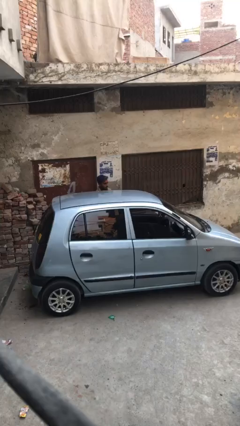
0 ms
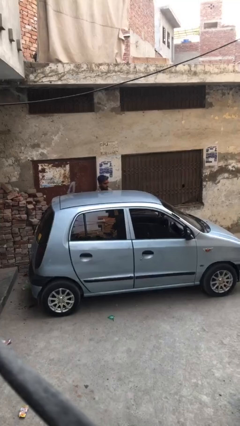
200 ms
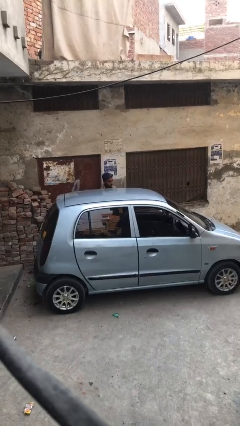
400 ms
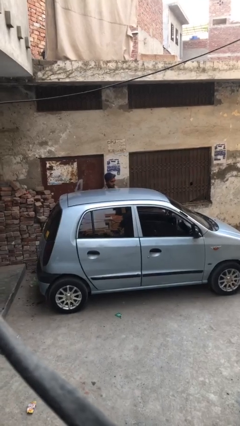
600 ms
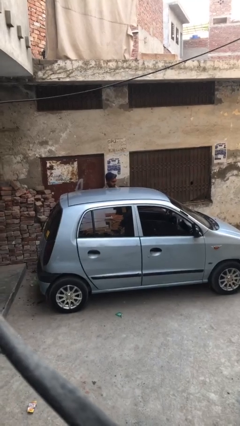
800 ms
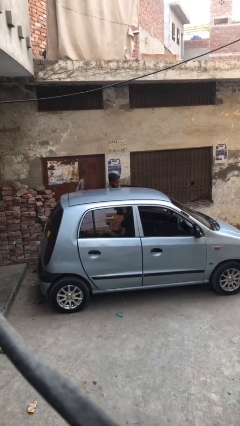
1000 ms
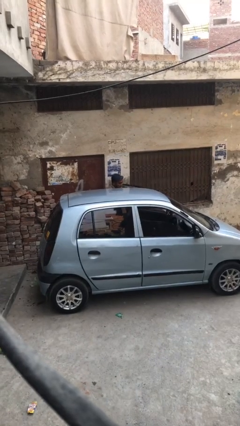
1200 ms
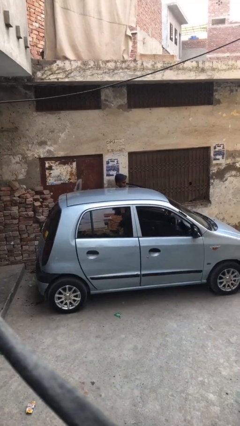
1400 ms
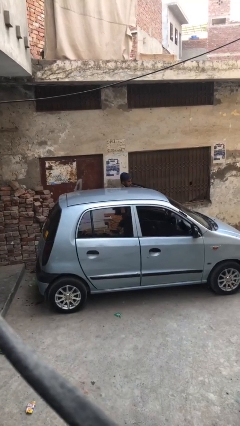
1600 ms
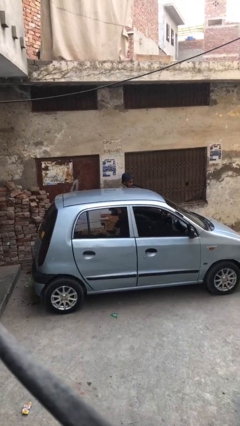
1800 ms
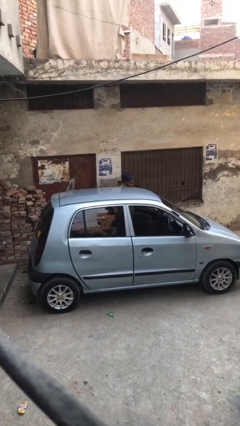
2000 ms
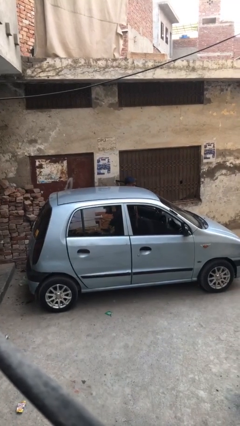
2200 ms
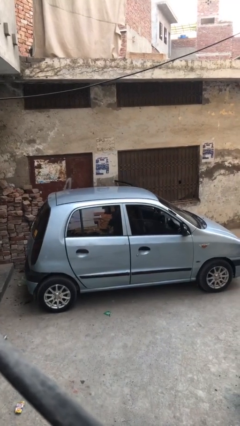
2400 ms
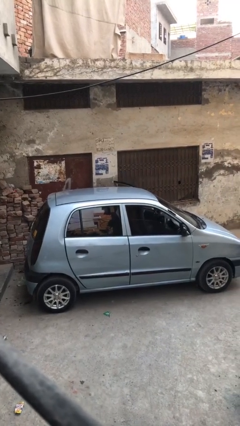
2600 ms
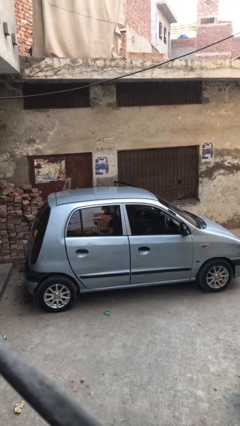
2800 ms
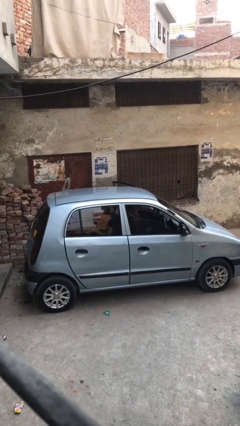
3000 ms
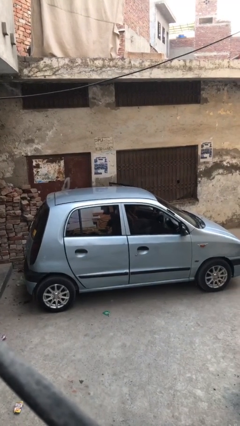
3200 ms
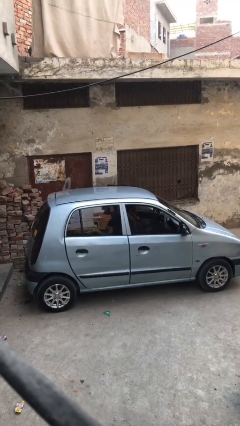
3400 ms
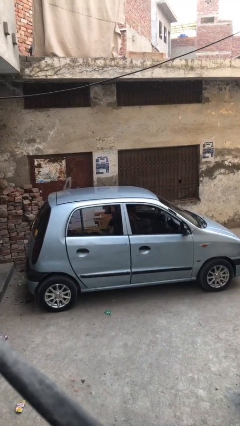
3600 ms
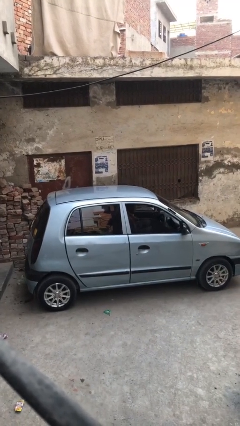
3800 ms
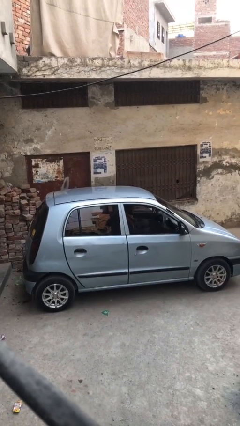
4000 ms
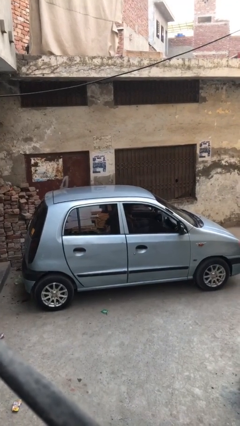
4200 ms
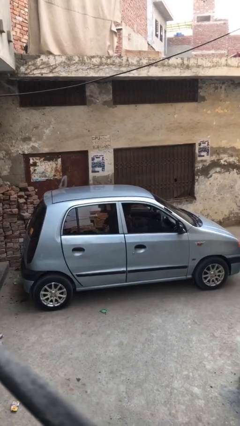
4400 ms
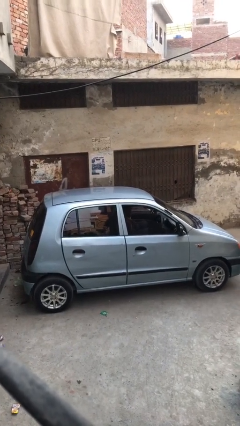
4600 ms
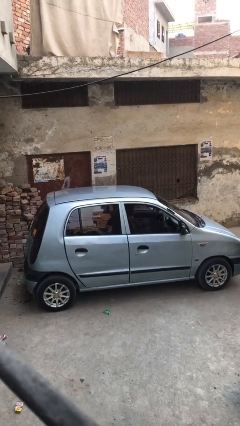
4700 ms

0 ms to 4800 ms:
person enters car

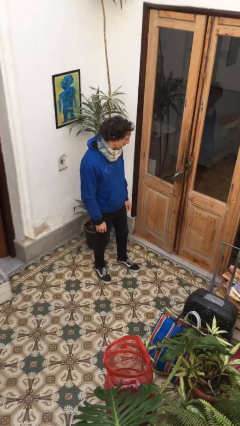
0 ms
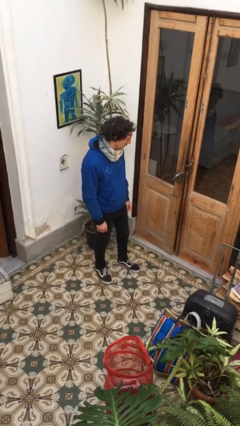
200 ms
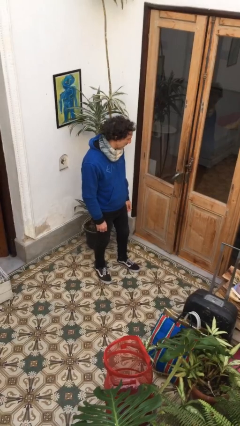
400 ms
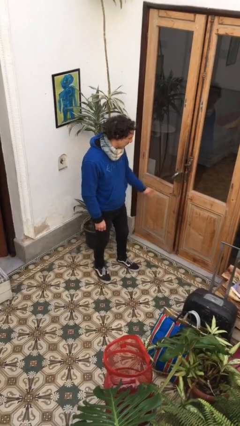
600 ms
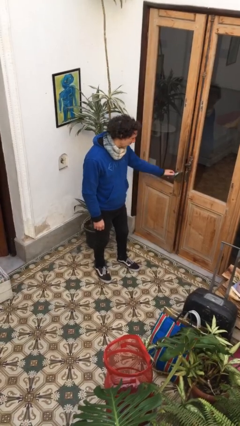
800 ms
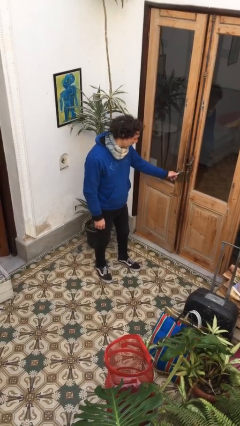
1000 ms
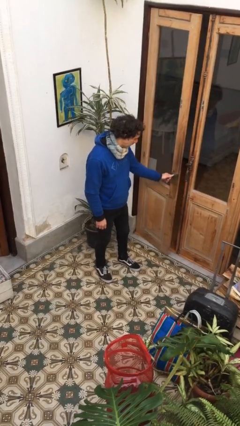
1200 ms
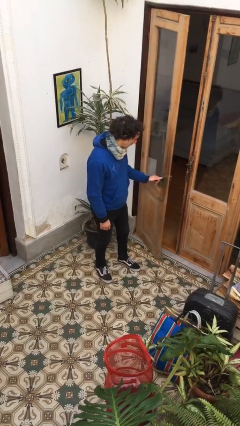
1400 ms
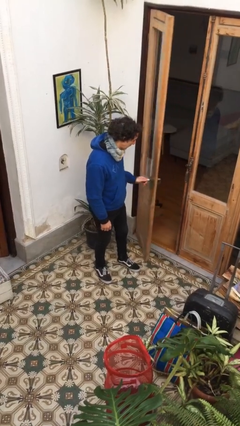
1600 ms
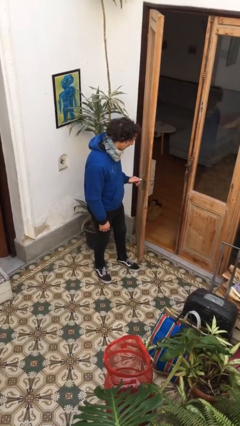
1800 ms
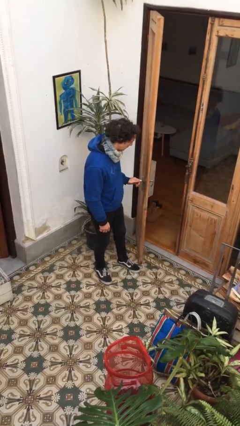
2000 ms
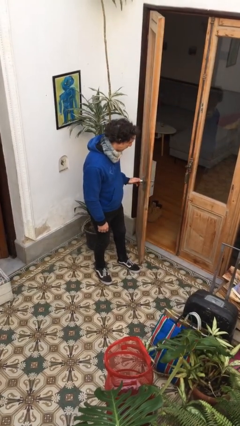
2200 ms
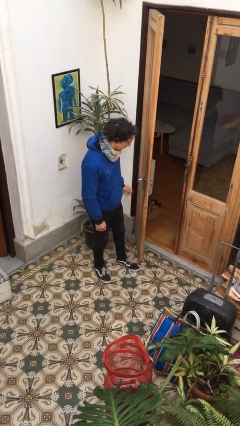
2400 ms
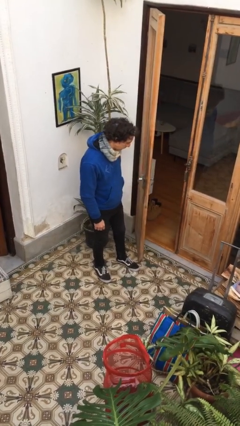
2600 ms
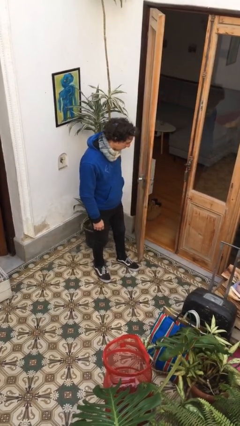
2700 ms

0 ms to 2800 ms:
person opens facility door

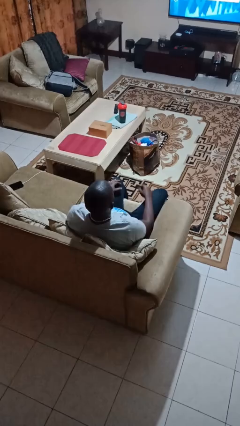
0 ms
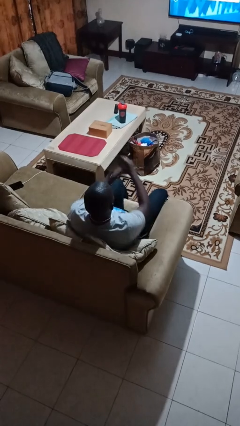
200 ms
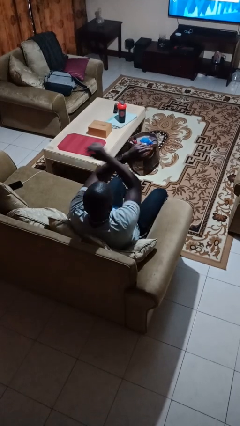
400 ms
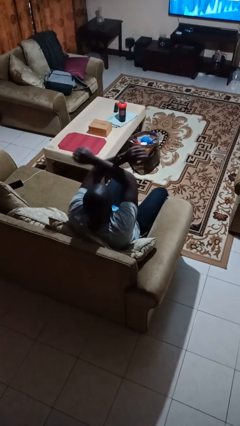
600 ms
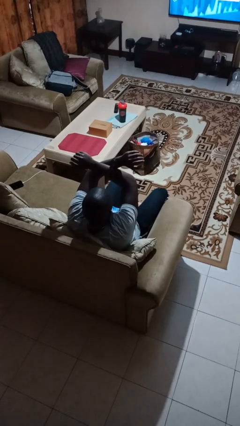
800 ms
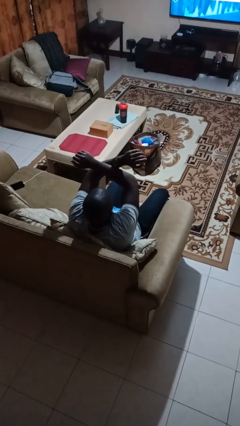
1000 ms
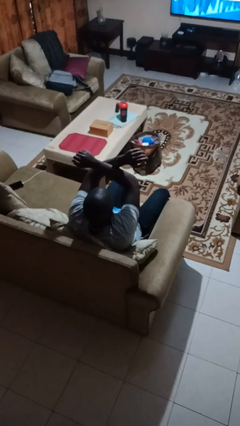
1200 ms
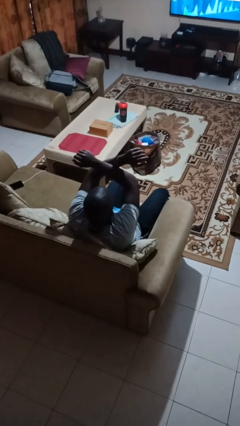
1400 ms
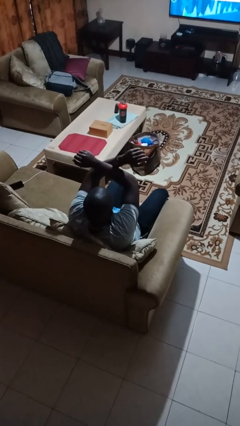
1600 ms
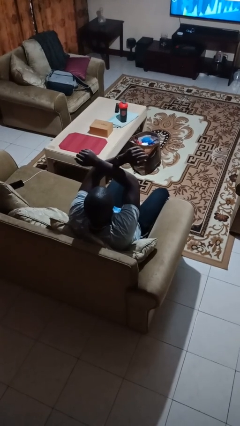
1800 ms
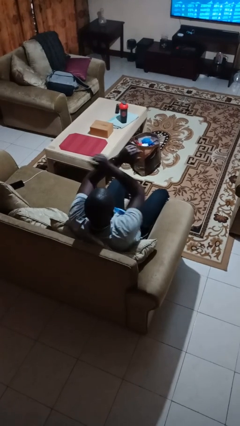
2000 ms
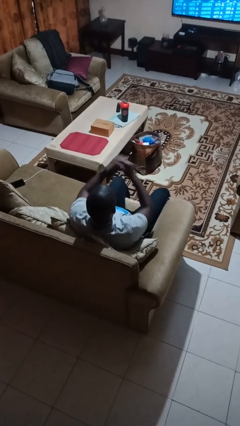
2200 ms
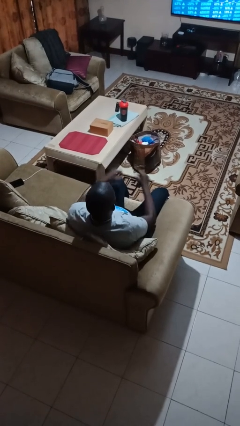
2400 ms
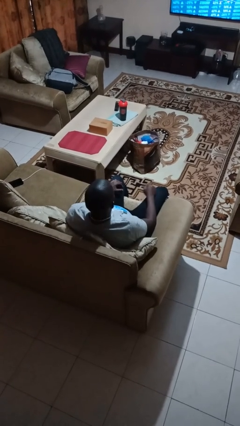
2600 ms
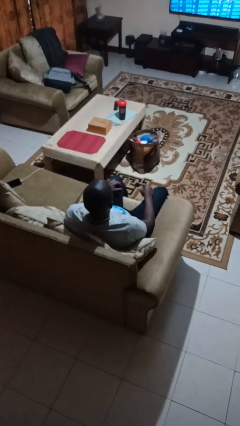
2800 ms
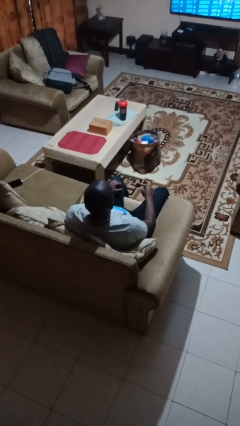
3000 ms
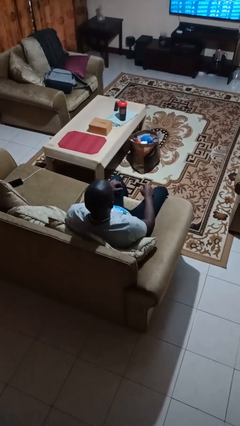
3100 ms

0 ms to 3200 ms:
person gestures arms x

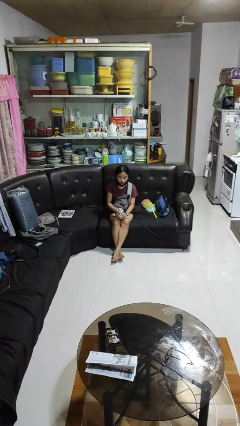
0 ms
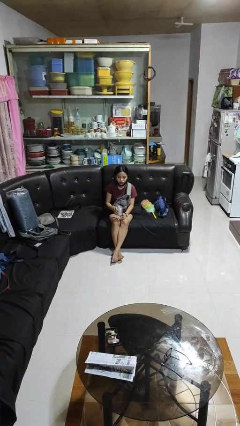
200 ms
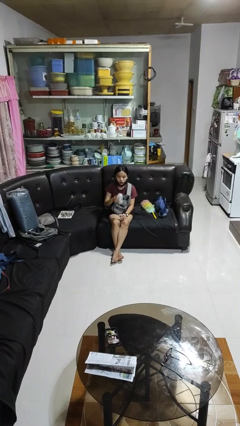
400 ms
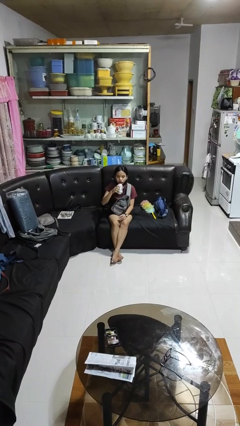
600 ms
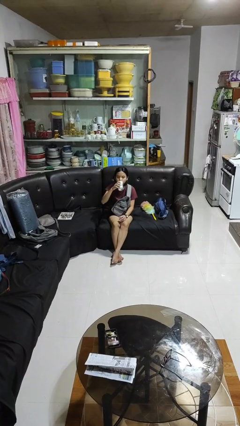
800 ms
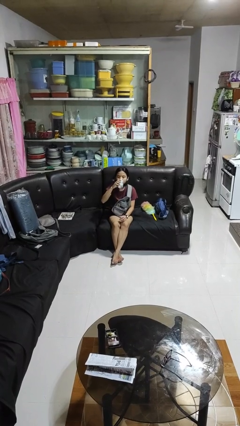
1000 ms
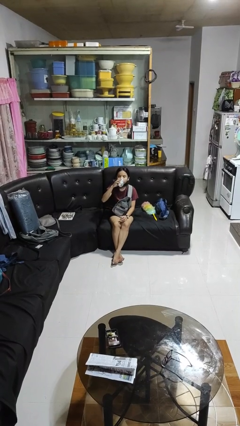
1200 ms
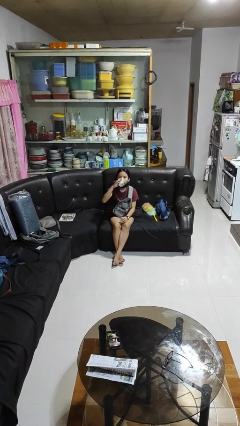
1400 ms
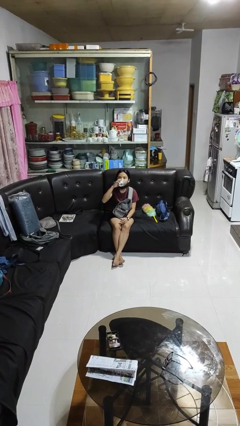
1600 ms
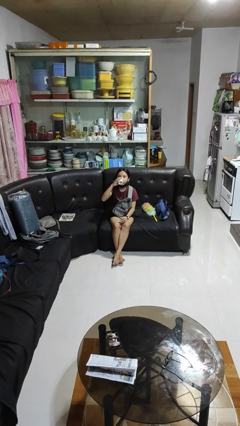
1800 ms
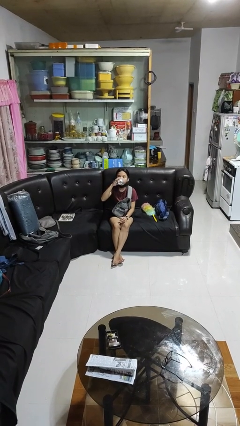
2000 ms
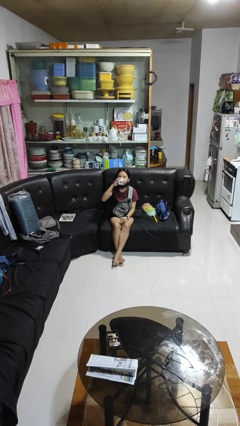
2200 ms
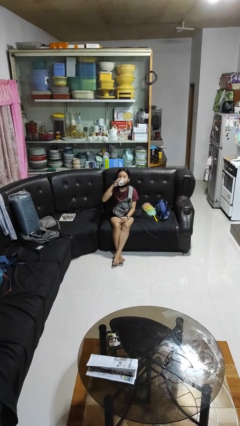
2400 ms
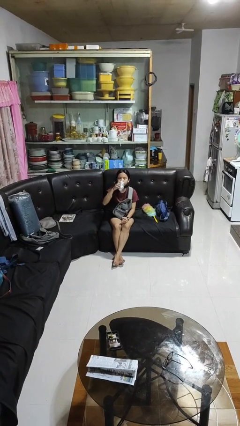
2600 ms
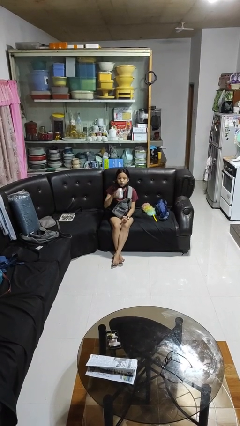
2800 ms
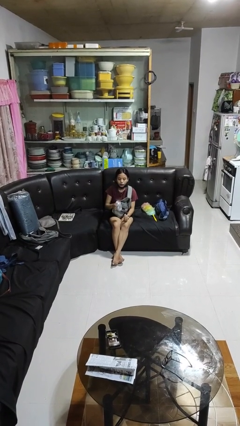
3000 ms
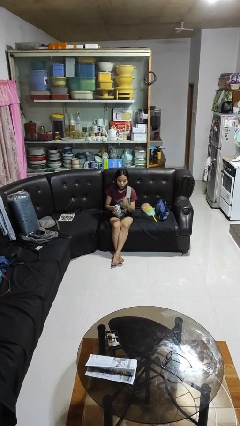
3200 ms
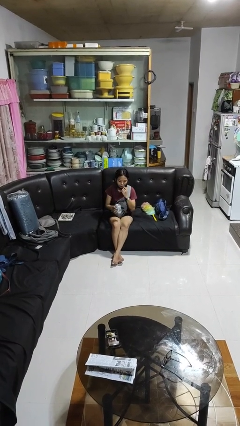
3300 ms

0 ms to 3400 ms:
person drinks from beverage can

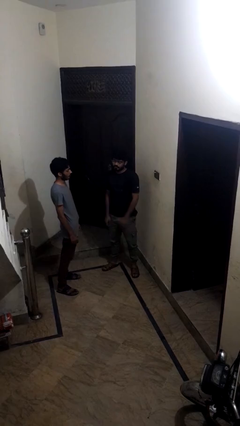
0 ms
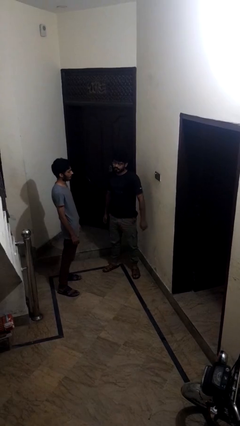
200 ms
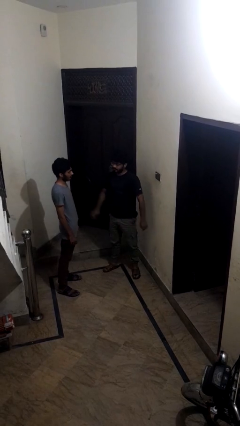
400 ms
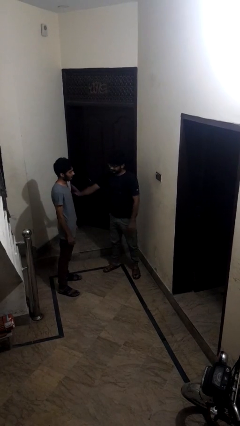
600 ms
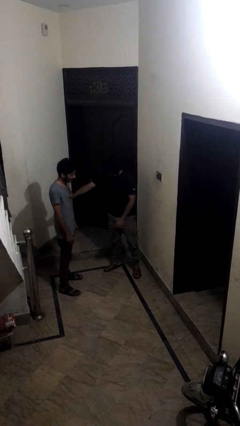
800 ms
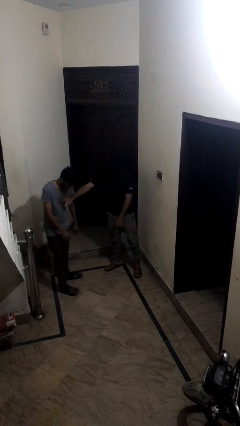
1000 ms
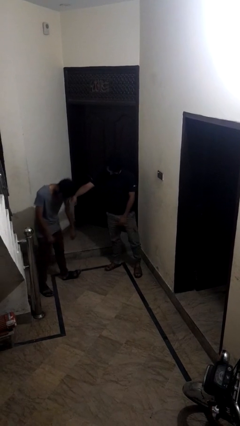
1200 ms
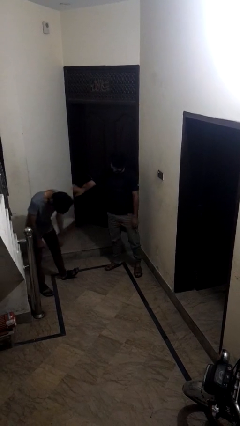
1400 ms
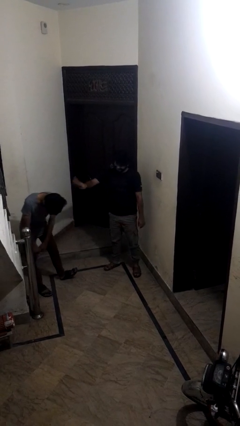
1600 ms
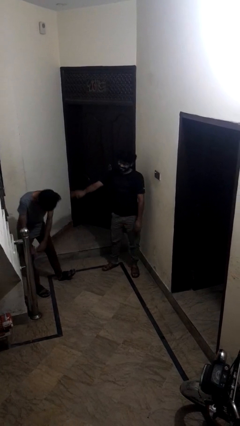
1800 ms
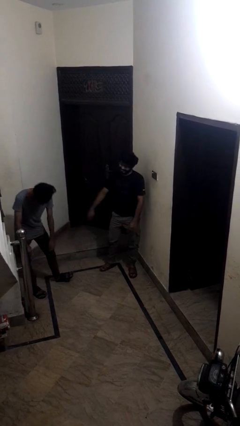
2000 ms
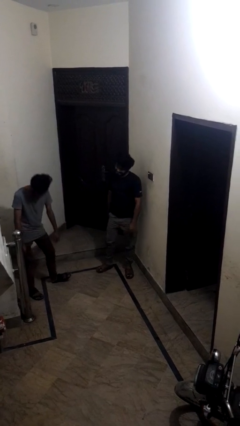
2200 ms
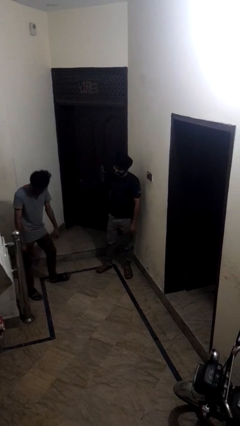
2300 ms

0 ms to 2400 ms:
person shoves person

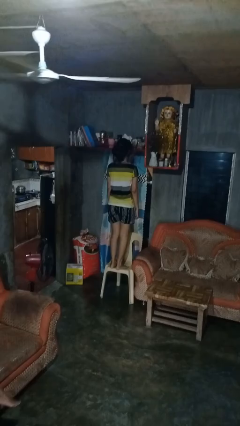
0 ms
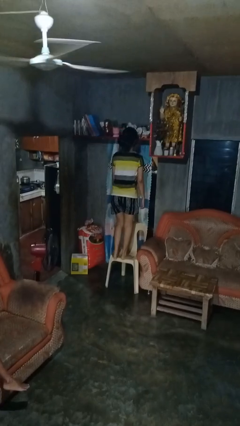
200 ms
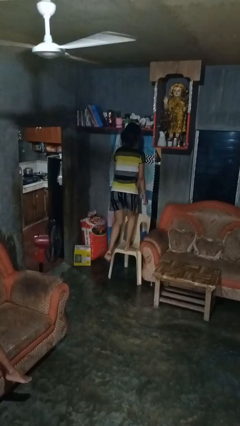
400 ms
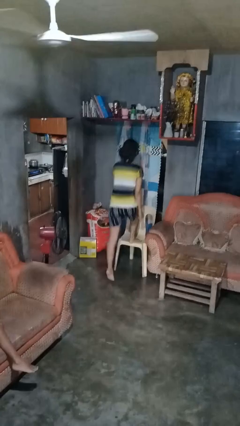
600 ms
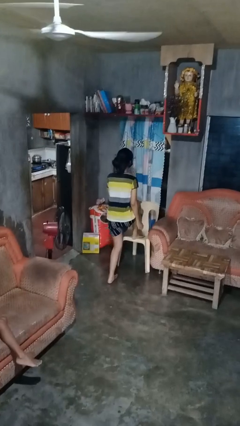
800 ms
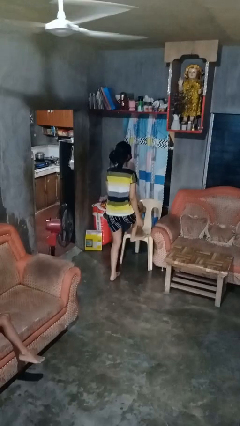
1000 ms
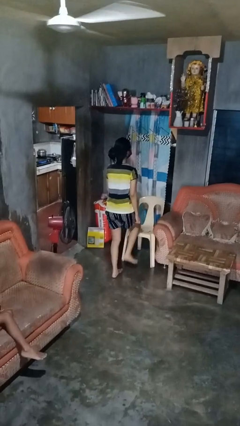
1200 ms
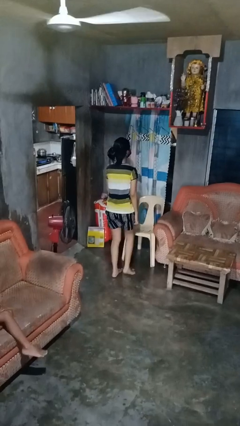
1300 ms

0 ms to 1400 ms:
person climbs off chair
